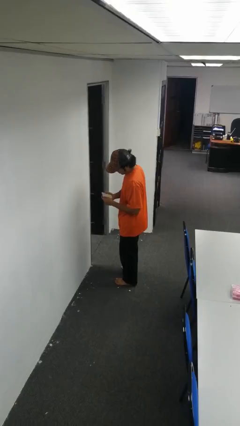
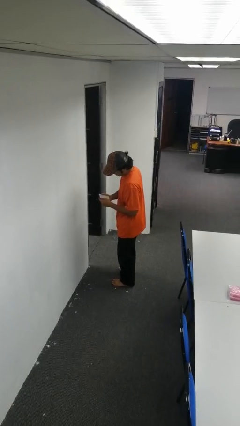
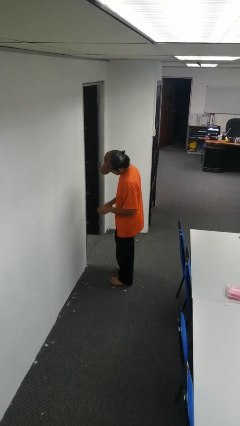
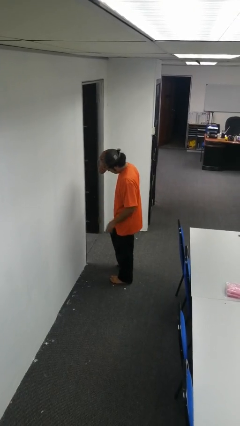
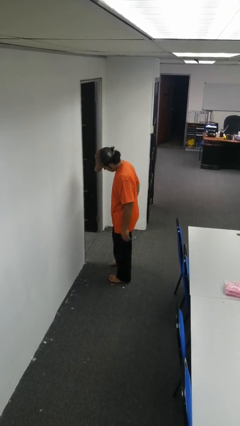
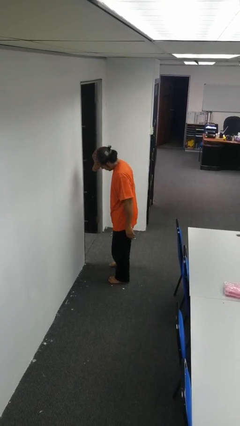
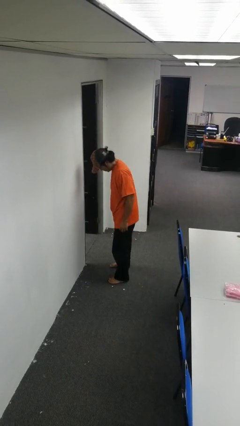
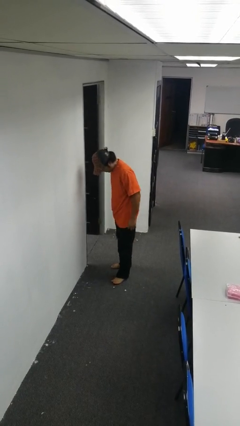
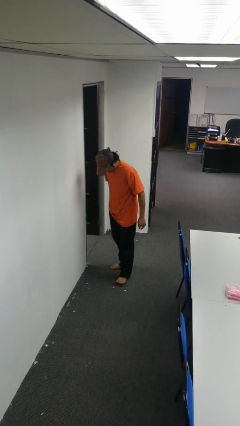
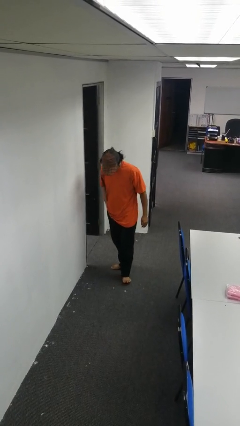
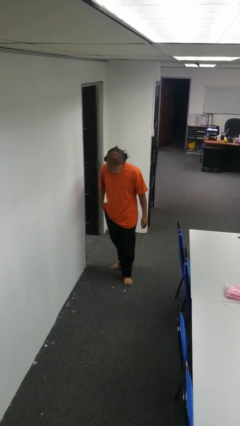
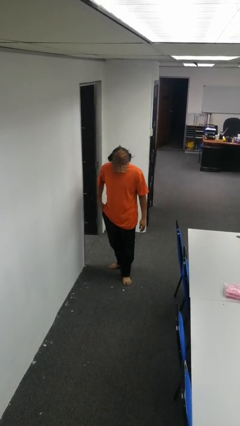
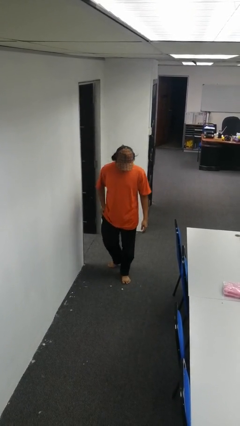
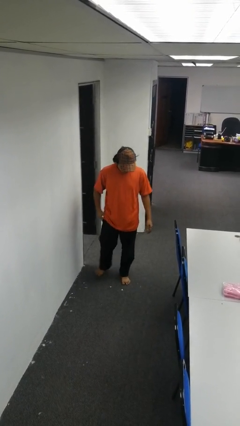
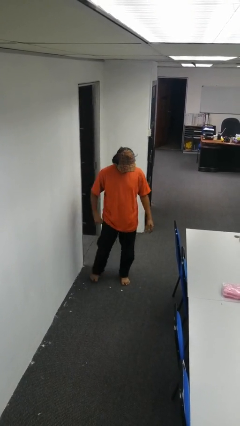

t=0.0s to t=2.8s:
person puts phone into pocket

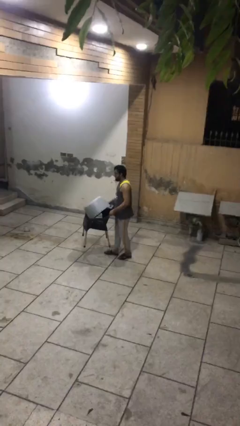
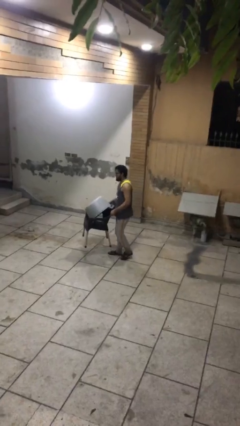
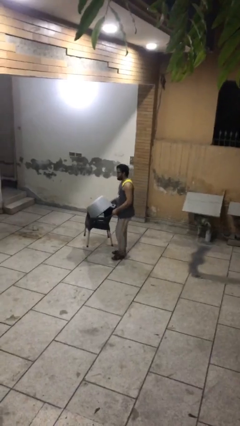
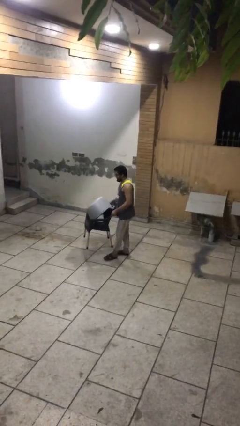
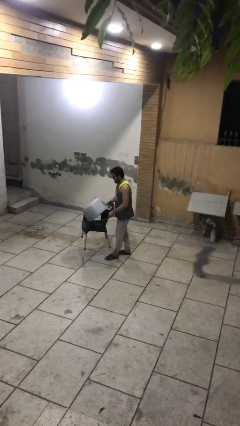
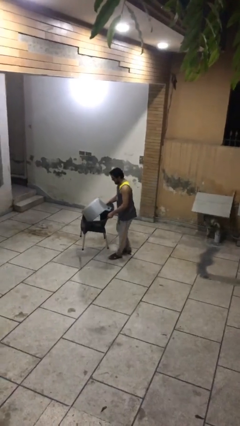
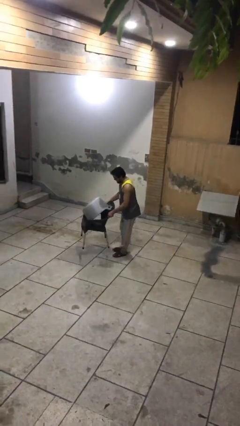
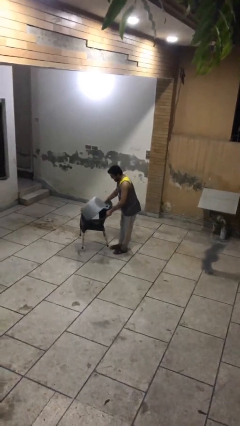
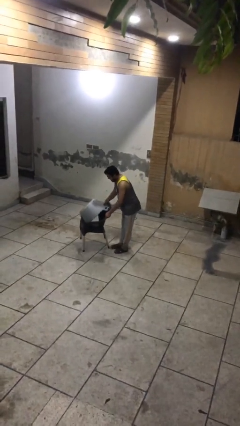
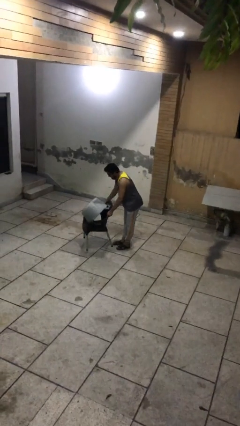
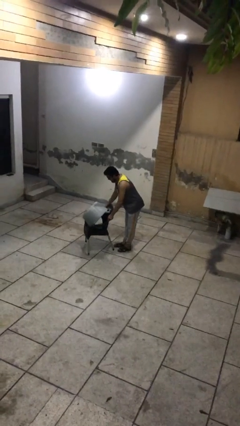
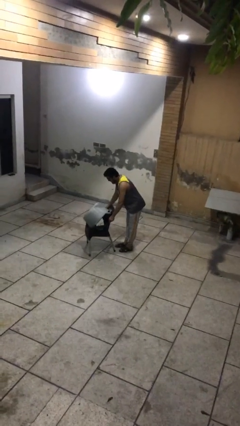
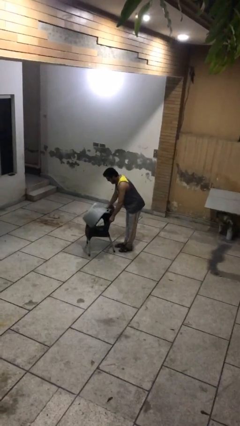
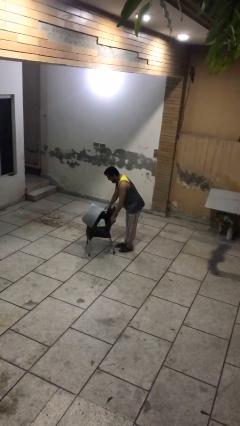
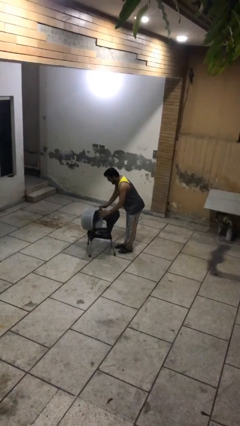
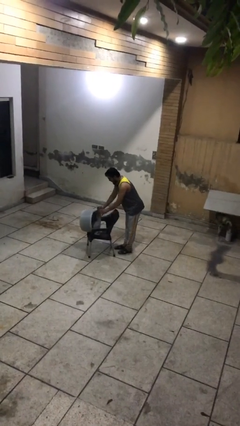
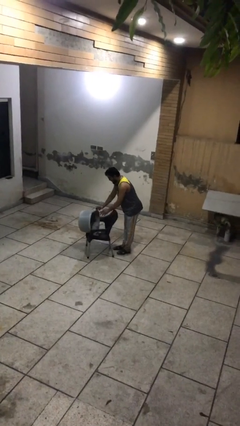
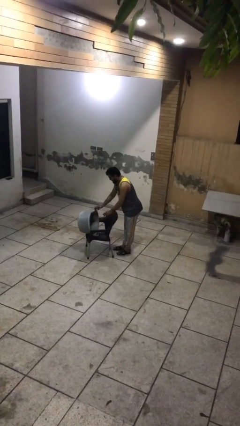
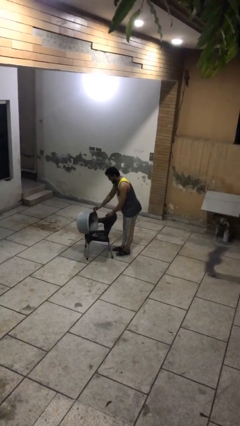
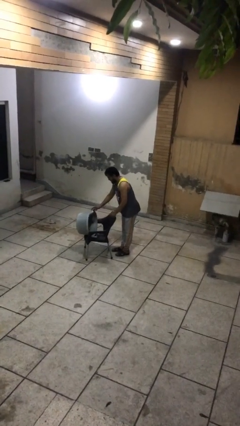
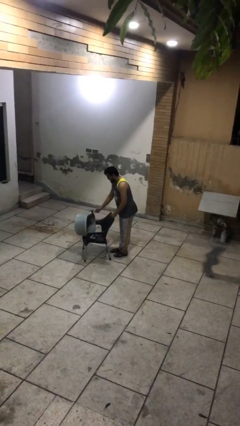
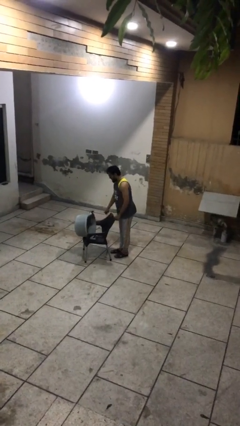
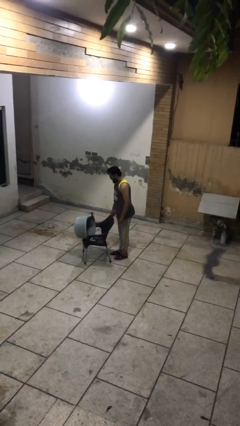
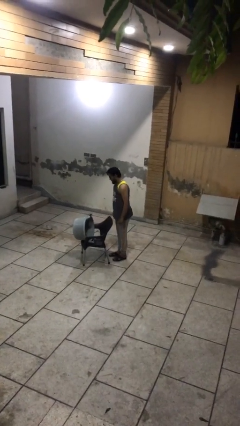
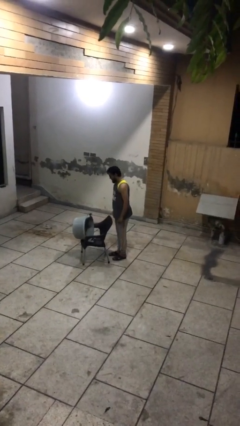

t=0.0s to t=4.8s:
person puts down object on floor

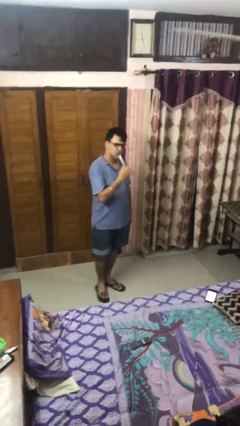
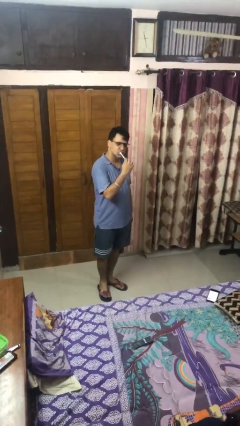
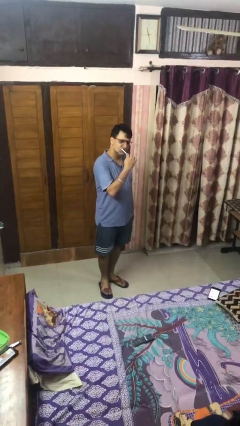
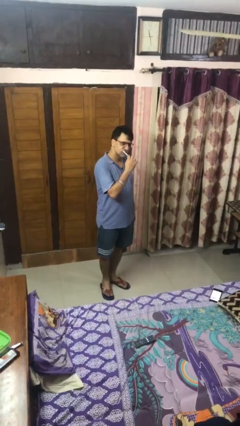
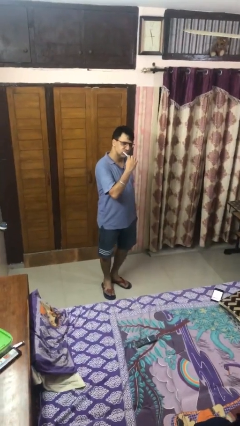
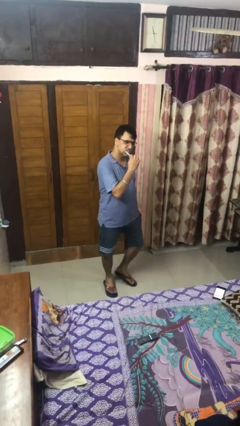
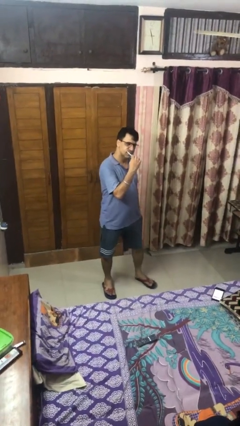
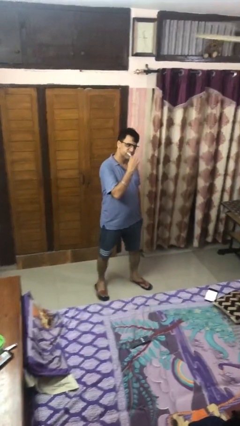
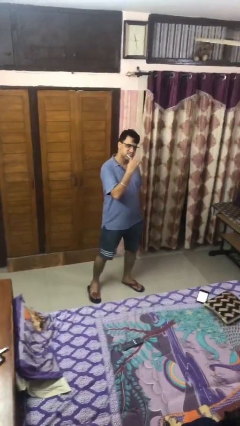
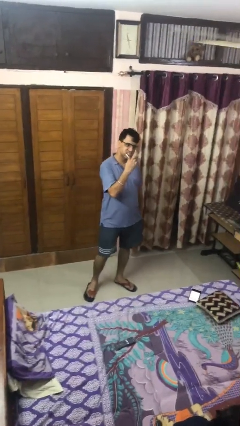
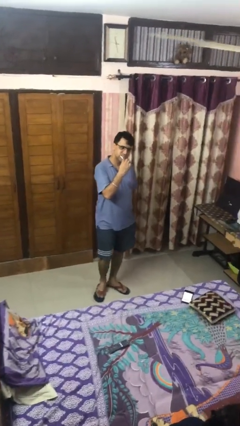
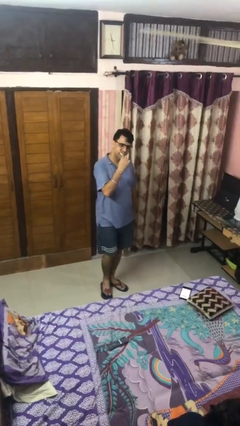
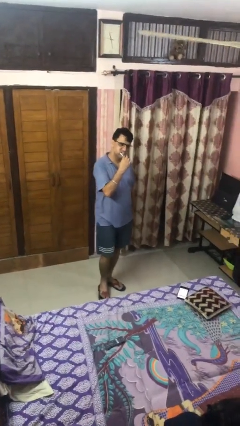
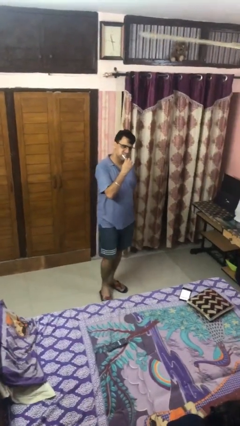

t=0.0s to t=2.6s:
person brushes teeth

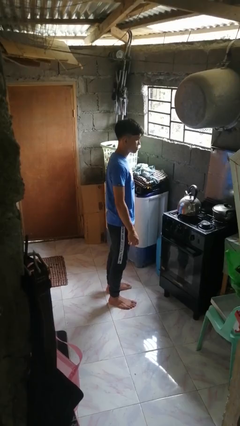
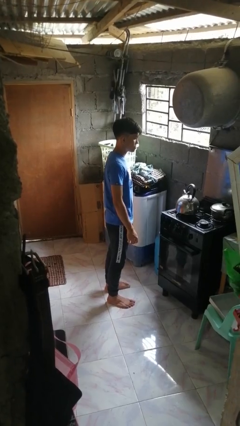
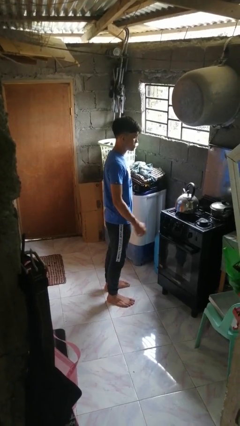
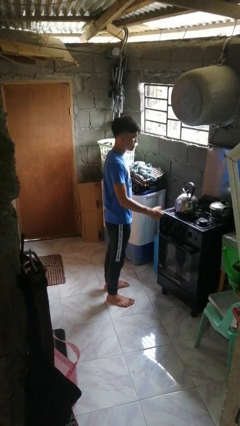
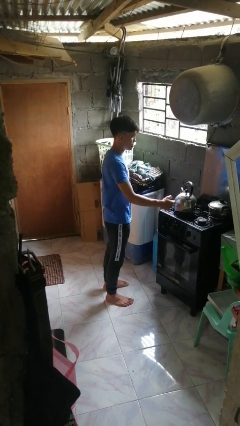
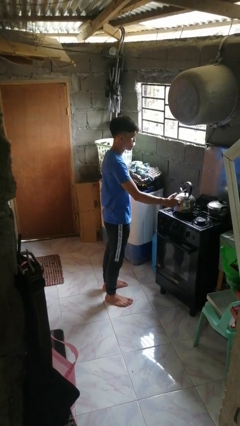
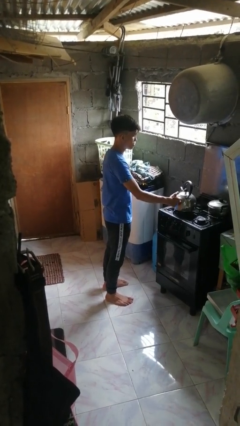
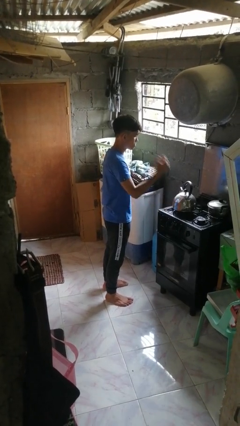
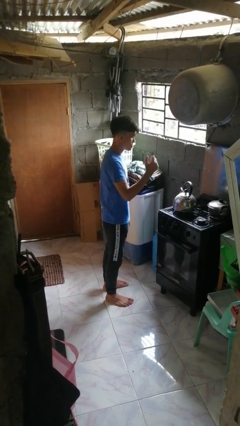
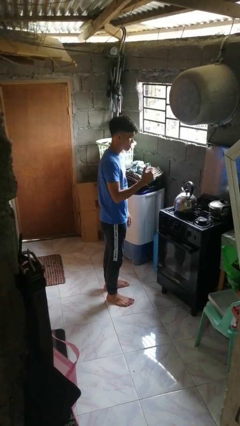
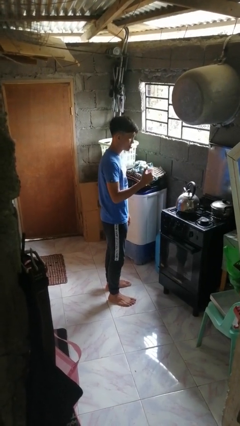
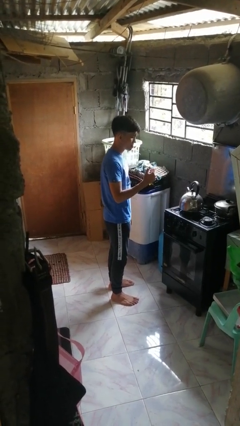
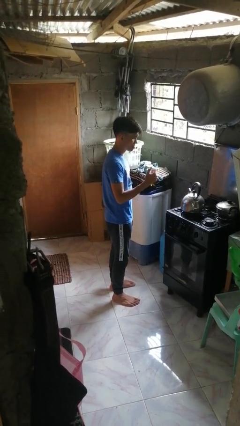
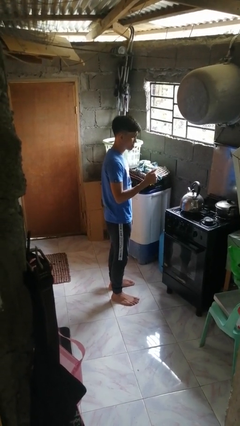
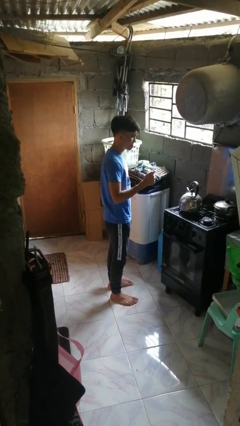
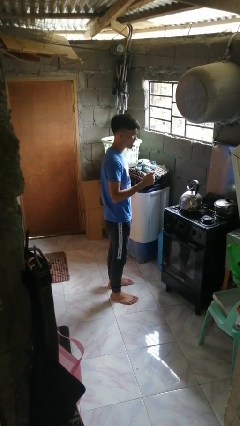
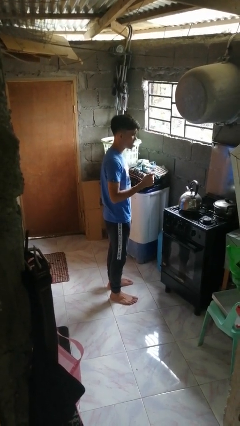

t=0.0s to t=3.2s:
person burns hand

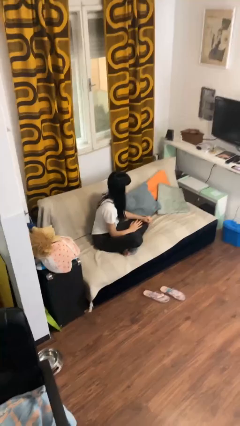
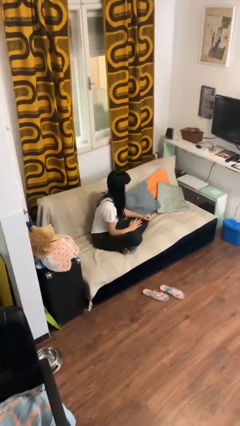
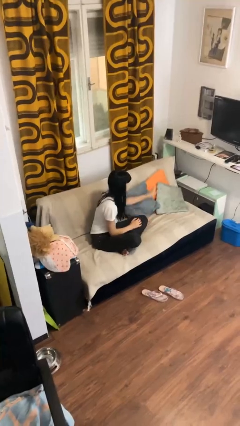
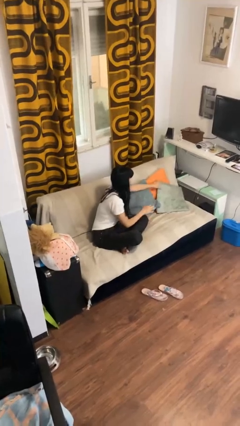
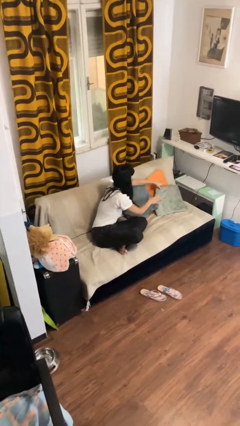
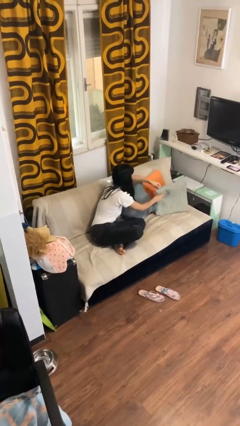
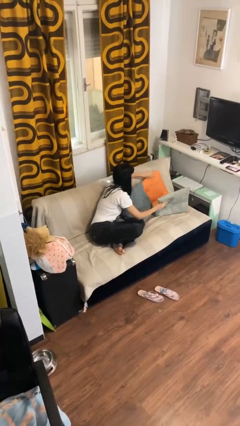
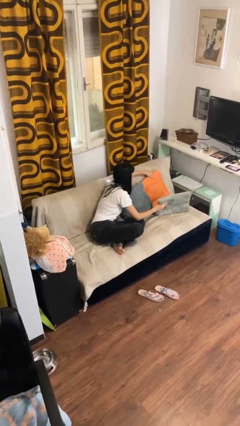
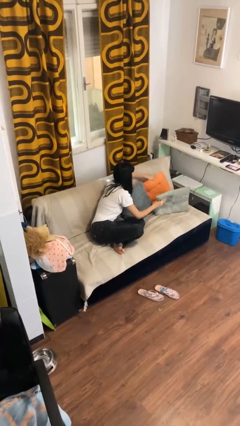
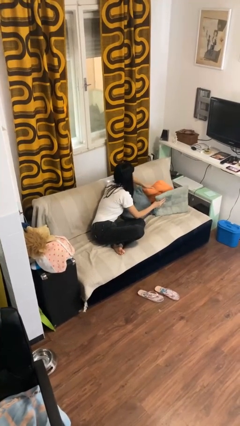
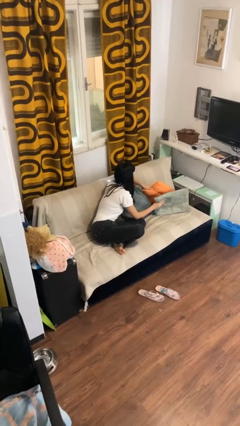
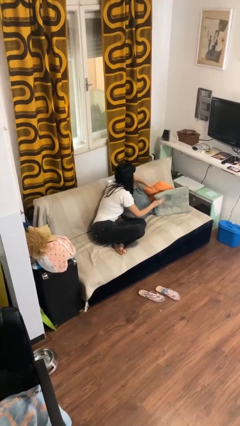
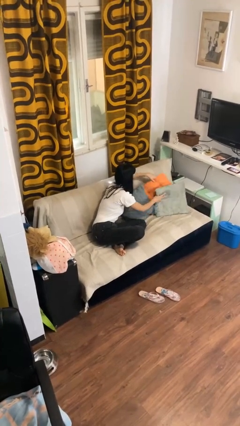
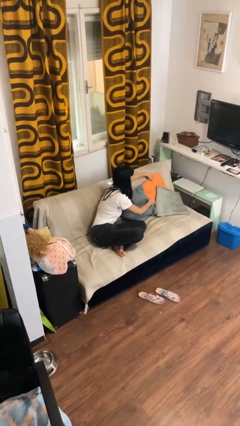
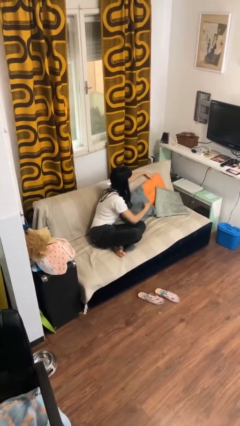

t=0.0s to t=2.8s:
person searches in couch

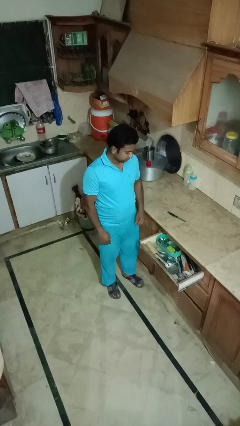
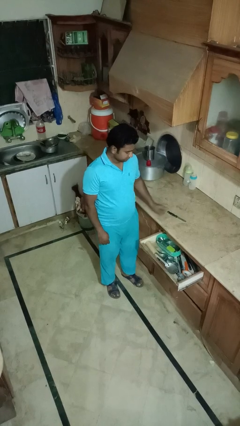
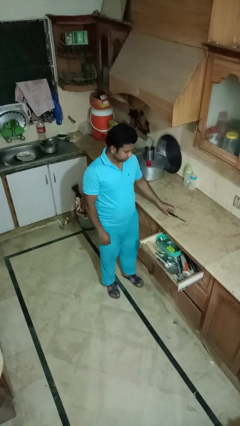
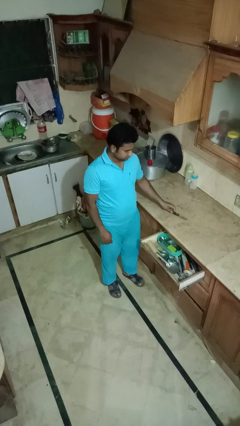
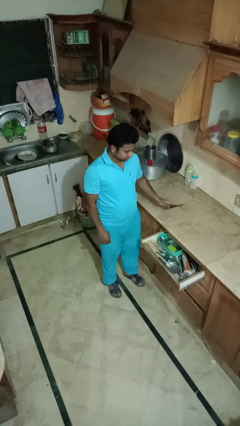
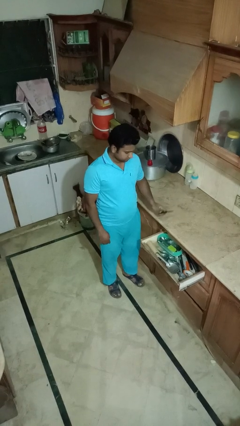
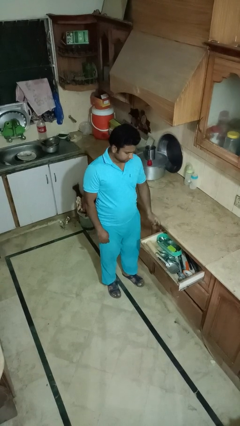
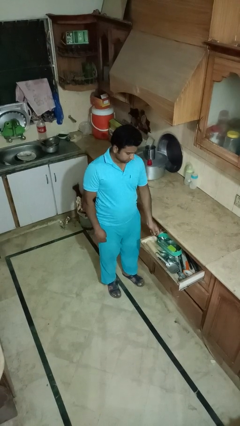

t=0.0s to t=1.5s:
person puts object into kitchen drawer
